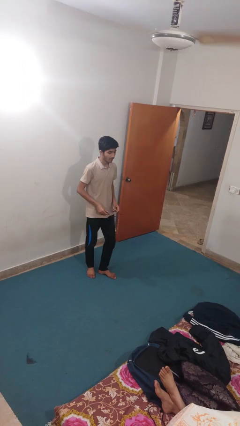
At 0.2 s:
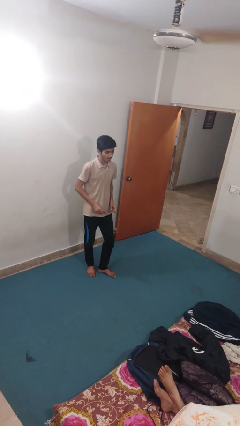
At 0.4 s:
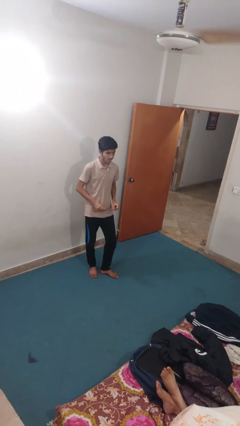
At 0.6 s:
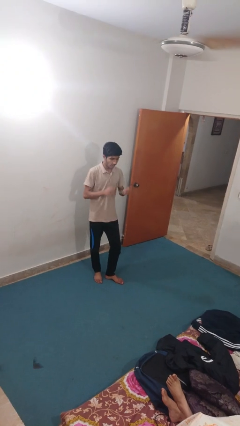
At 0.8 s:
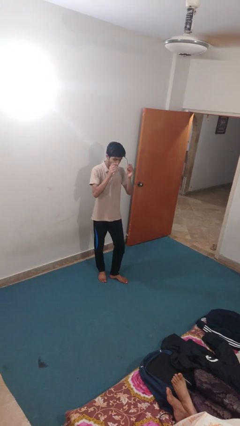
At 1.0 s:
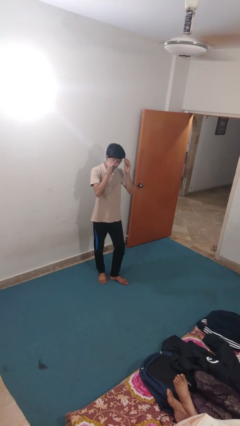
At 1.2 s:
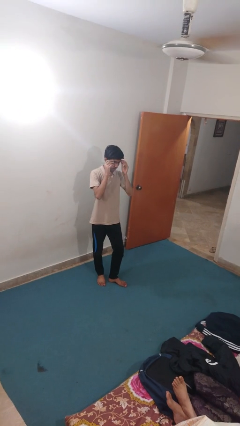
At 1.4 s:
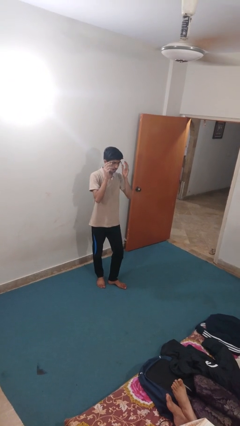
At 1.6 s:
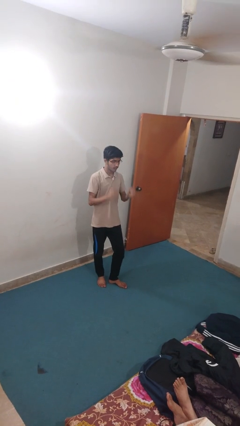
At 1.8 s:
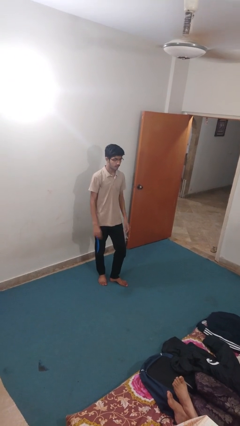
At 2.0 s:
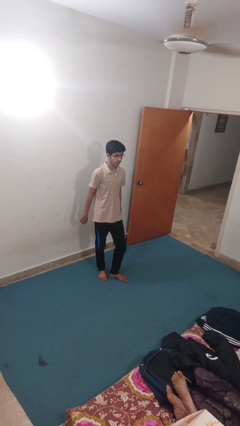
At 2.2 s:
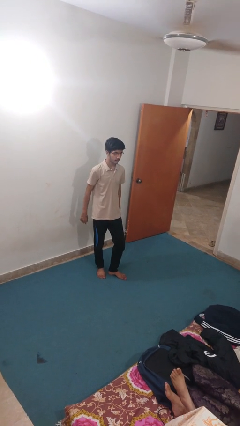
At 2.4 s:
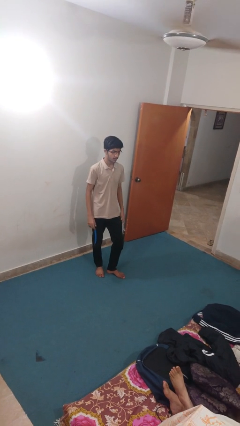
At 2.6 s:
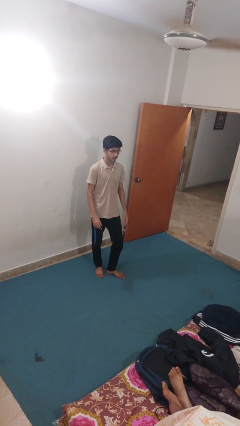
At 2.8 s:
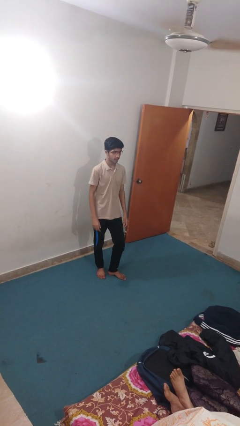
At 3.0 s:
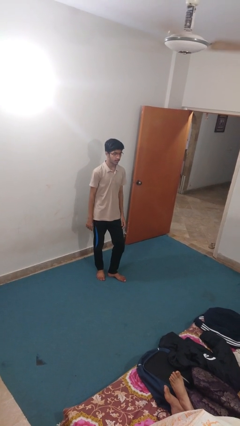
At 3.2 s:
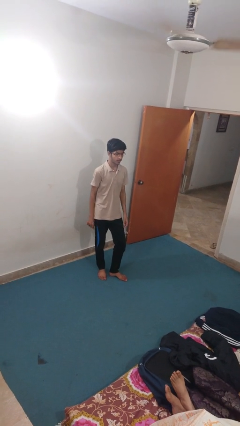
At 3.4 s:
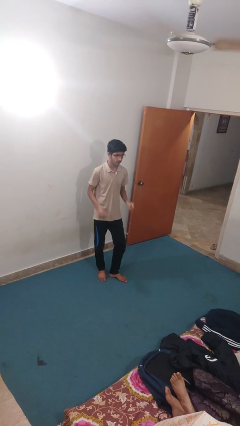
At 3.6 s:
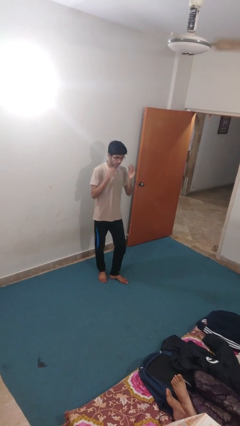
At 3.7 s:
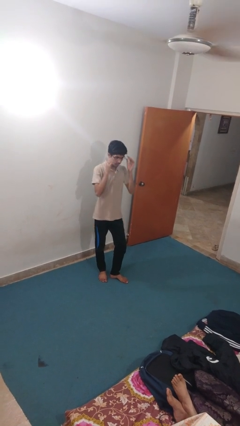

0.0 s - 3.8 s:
person puts on glasses

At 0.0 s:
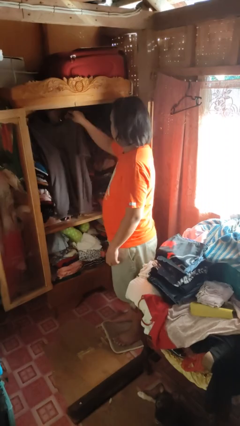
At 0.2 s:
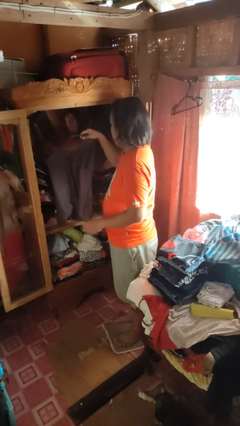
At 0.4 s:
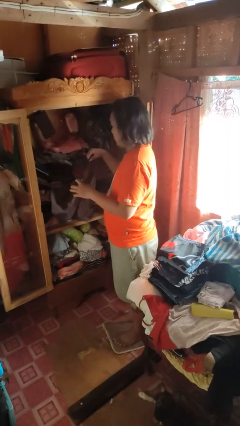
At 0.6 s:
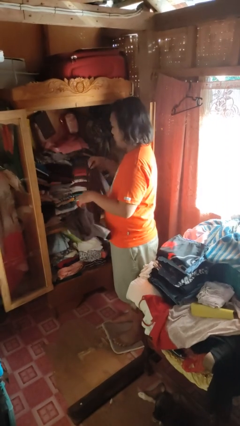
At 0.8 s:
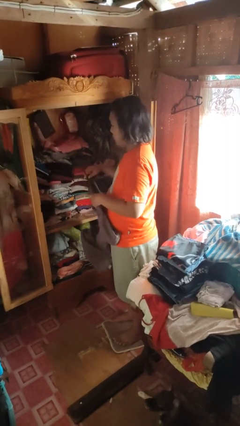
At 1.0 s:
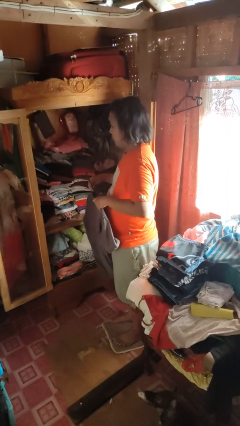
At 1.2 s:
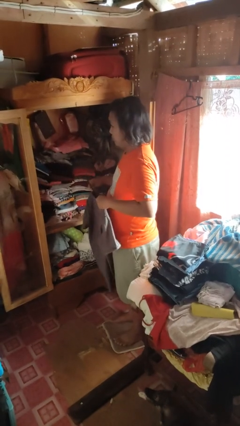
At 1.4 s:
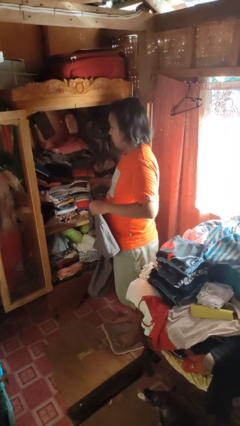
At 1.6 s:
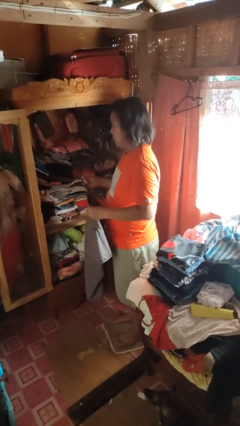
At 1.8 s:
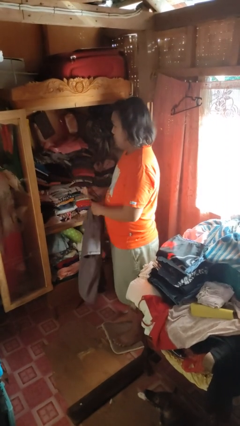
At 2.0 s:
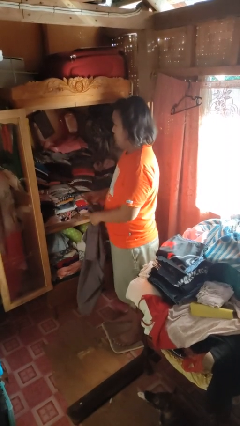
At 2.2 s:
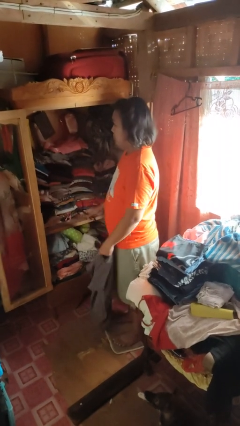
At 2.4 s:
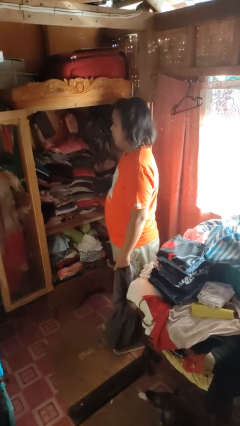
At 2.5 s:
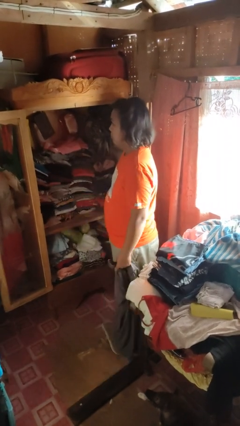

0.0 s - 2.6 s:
person takes clothes from closet

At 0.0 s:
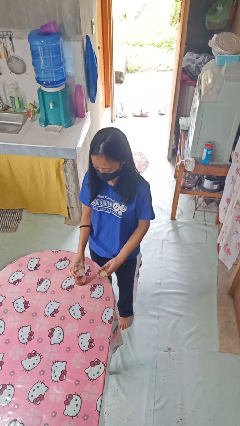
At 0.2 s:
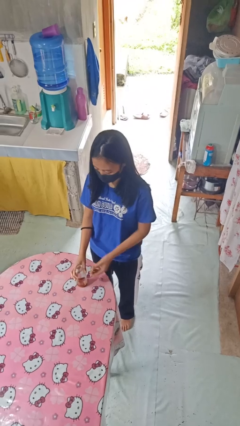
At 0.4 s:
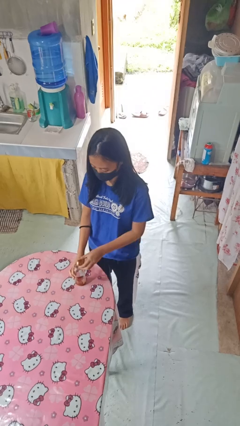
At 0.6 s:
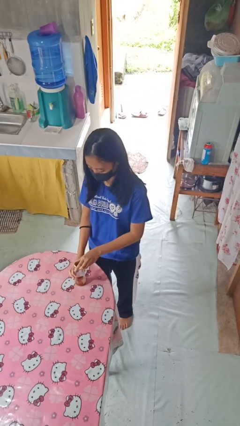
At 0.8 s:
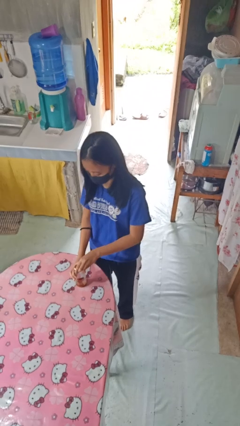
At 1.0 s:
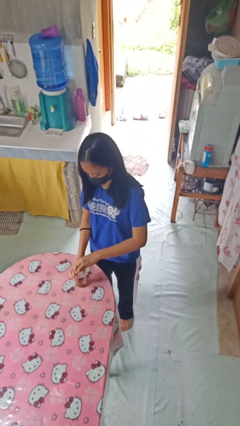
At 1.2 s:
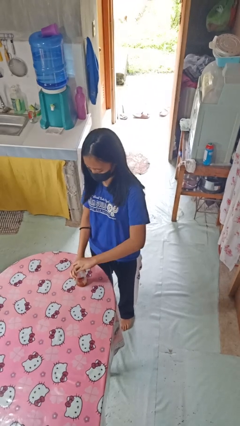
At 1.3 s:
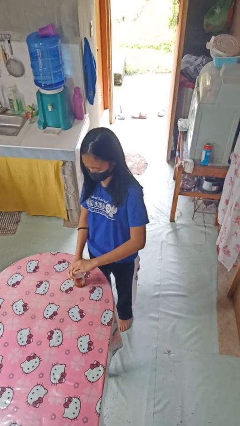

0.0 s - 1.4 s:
person closes jar

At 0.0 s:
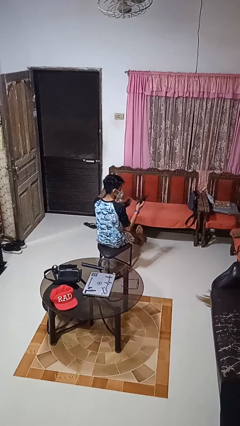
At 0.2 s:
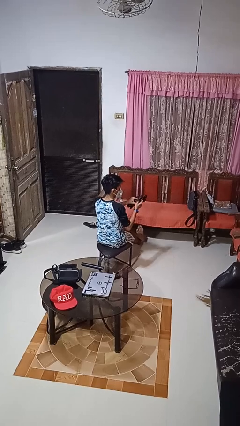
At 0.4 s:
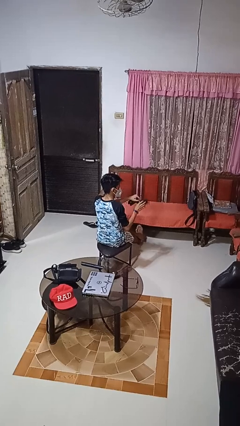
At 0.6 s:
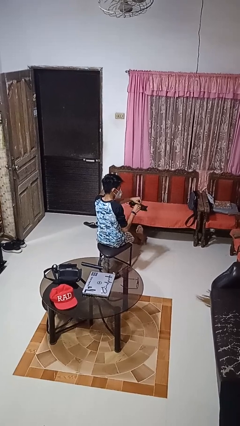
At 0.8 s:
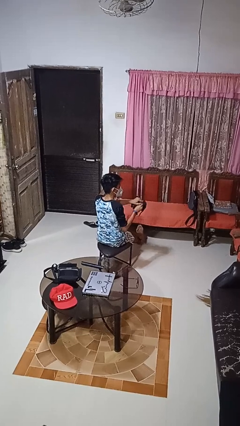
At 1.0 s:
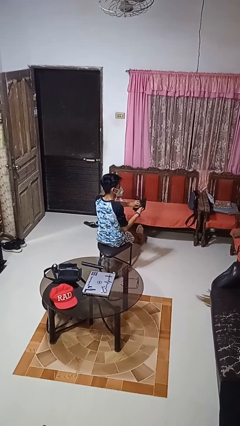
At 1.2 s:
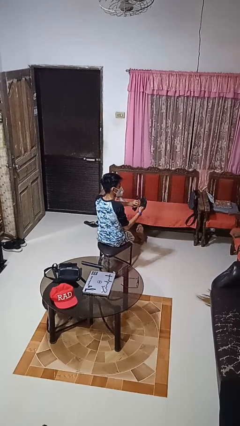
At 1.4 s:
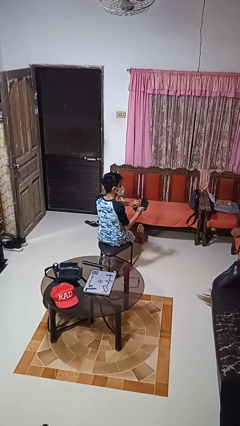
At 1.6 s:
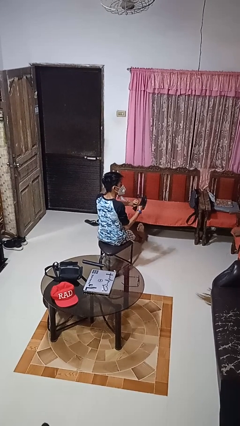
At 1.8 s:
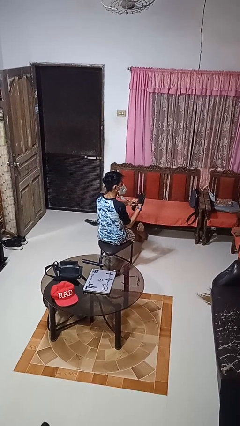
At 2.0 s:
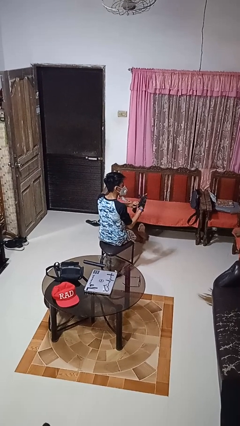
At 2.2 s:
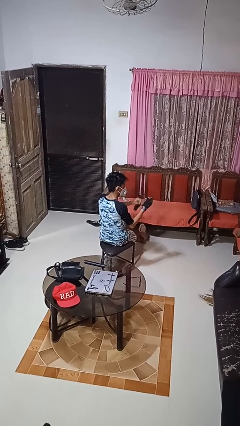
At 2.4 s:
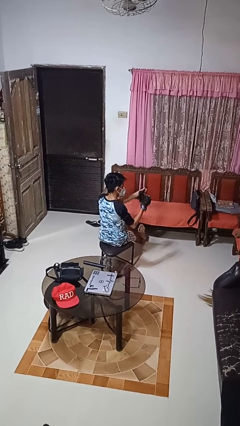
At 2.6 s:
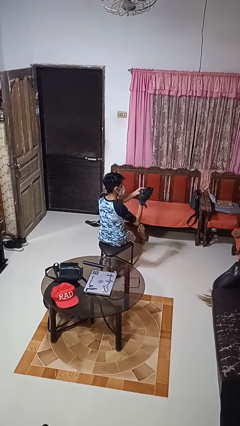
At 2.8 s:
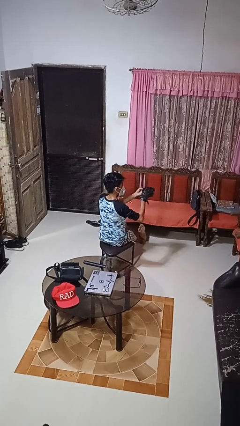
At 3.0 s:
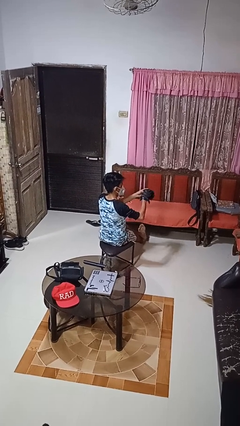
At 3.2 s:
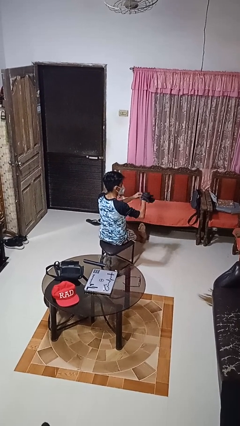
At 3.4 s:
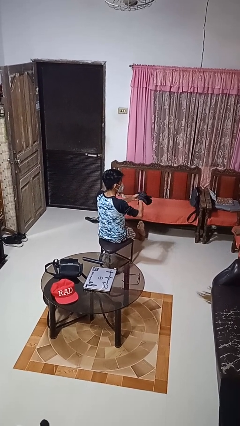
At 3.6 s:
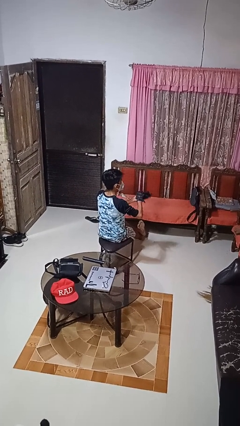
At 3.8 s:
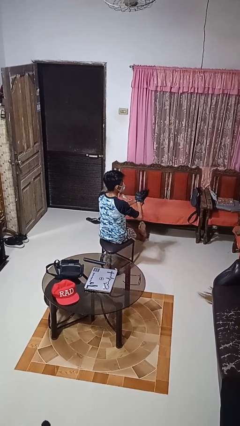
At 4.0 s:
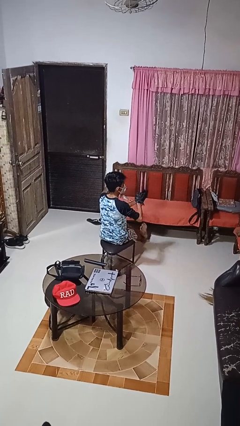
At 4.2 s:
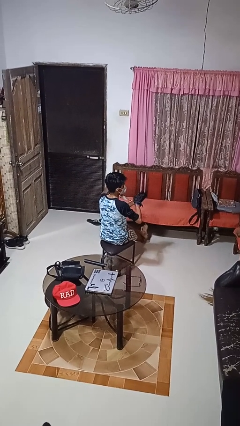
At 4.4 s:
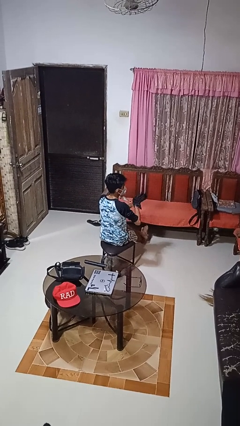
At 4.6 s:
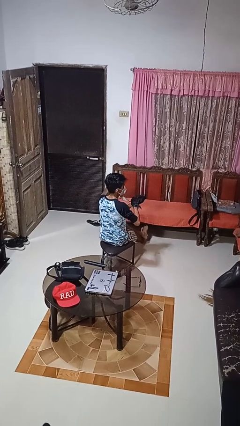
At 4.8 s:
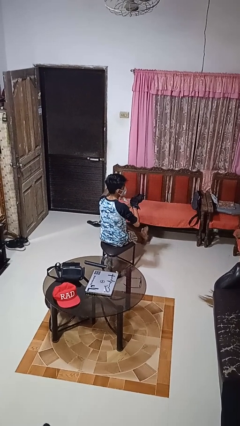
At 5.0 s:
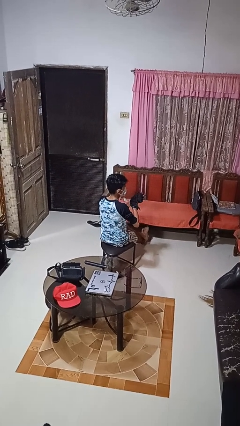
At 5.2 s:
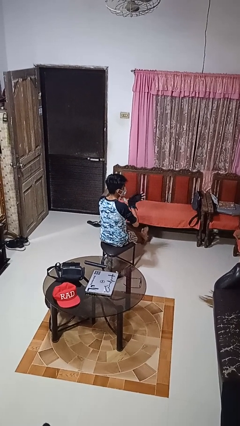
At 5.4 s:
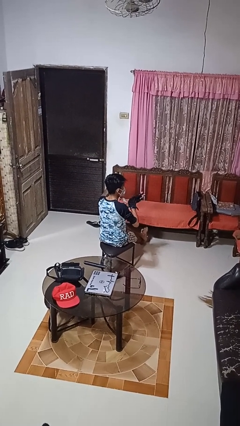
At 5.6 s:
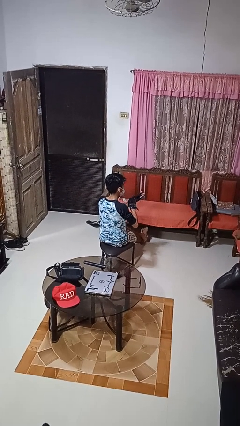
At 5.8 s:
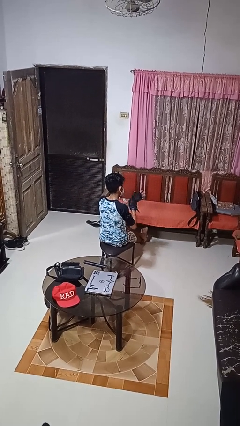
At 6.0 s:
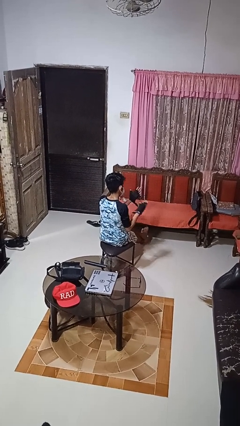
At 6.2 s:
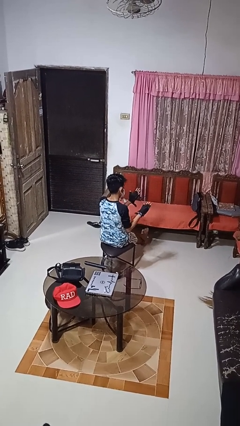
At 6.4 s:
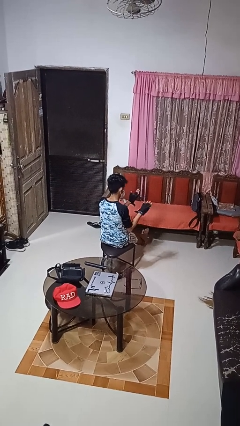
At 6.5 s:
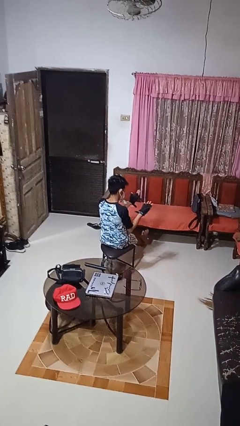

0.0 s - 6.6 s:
person puts on gloves

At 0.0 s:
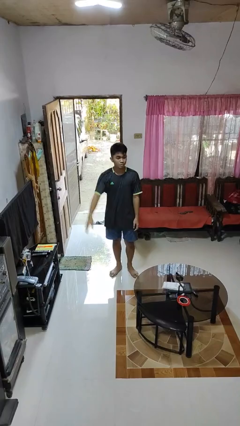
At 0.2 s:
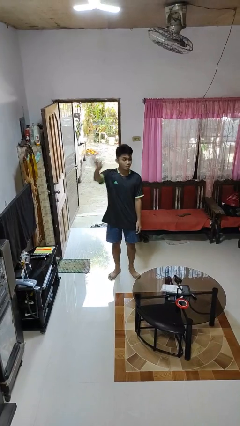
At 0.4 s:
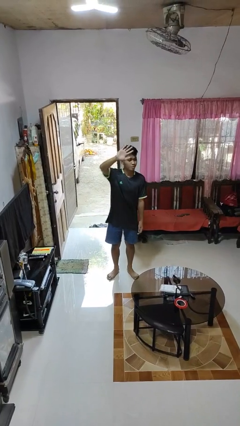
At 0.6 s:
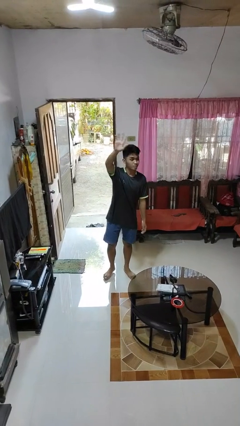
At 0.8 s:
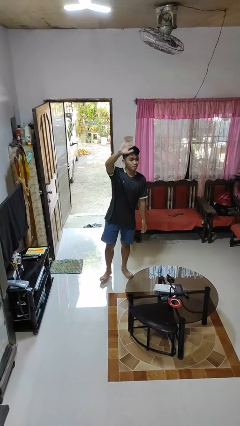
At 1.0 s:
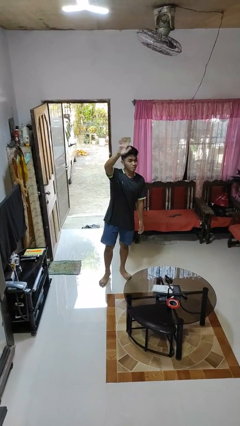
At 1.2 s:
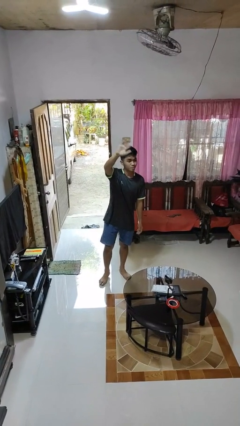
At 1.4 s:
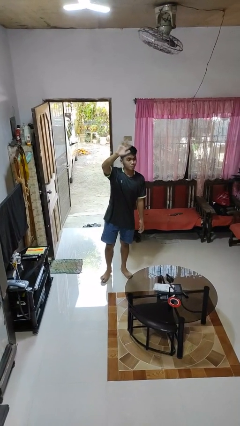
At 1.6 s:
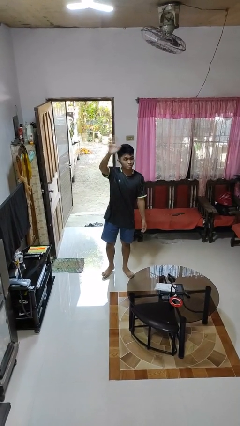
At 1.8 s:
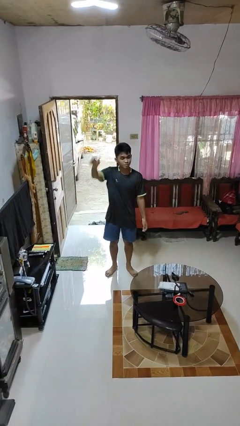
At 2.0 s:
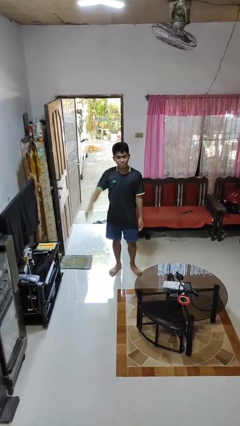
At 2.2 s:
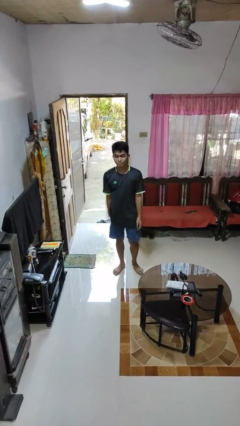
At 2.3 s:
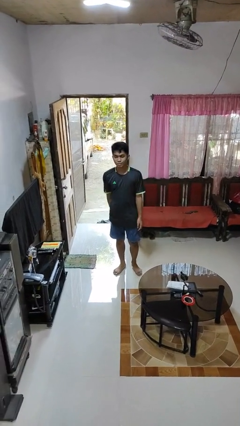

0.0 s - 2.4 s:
person waves at person

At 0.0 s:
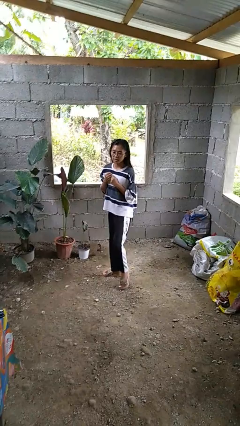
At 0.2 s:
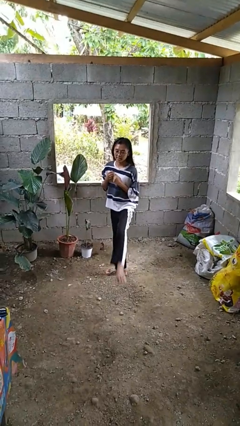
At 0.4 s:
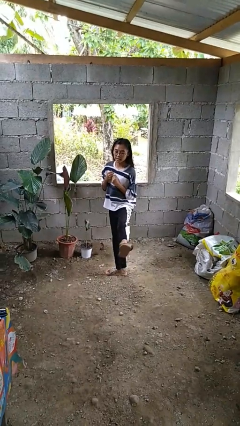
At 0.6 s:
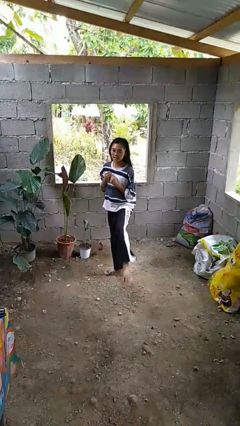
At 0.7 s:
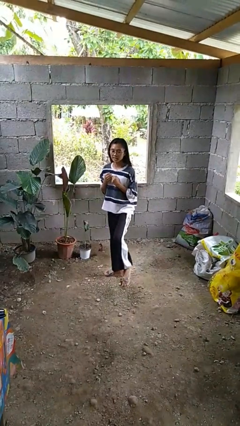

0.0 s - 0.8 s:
person karate kicks
